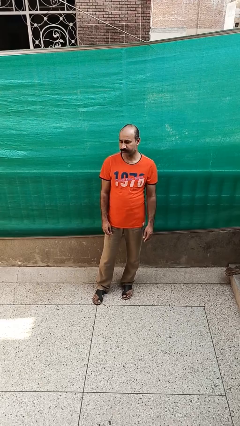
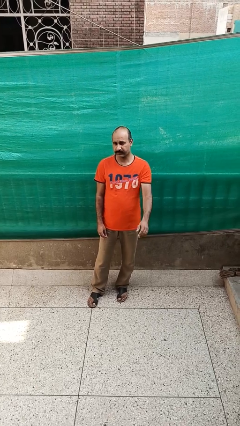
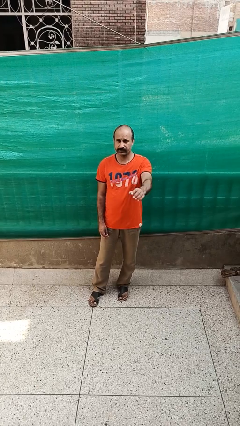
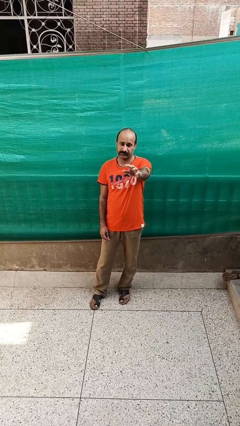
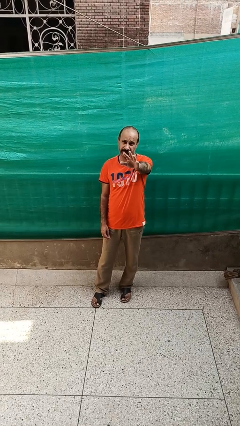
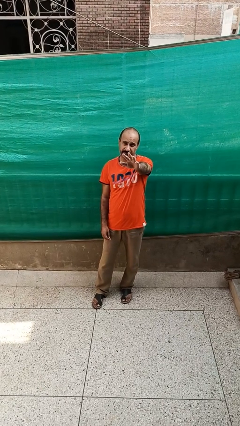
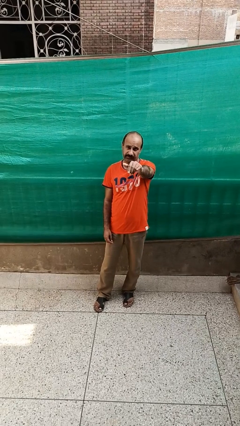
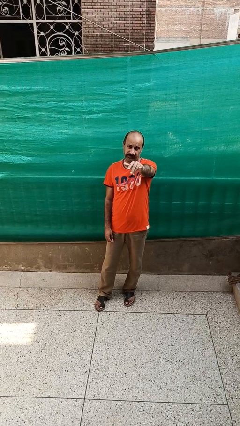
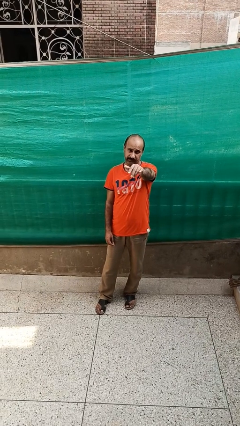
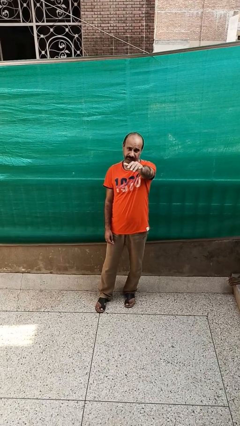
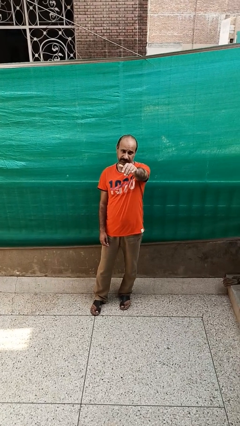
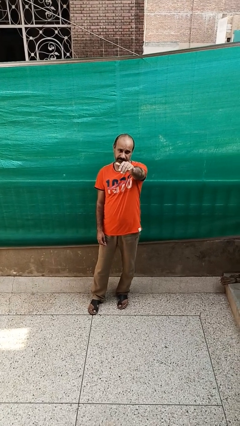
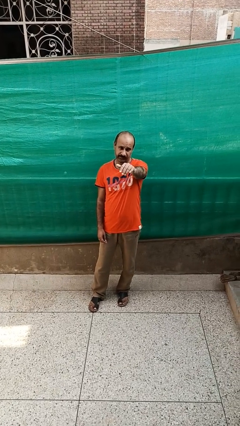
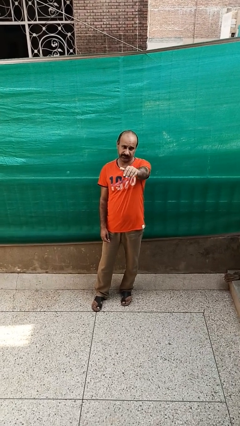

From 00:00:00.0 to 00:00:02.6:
person gestures come here

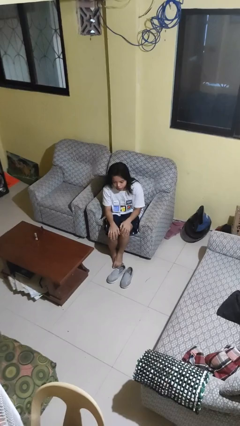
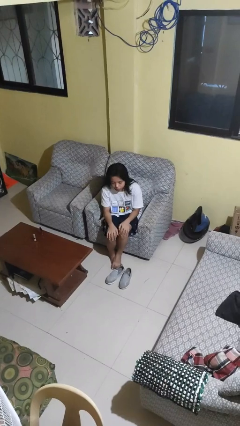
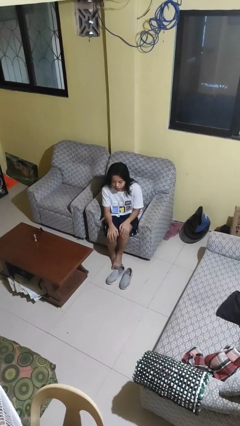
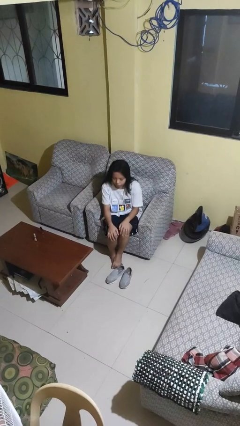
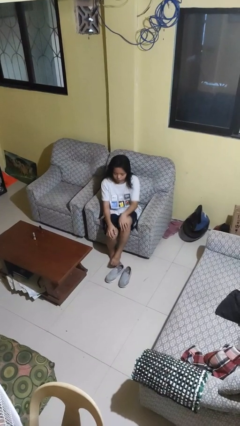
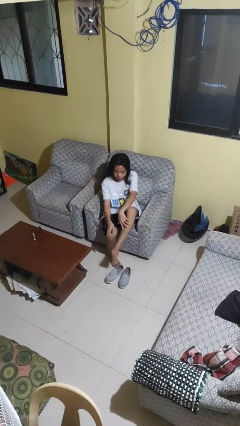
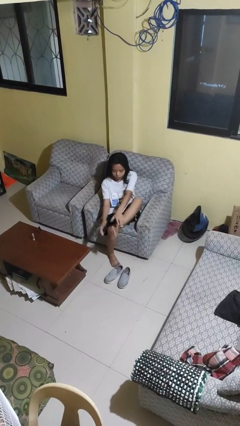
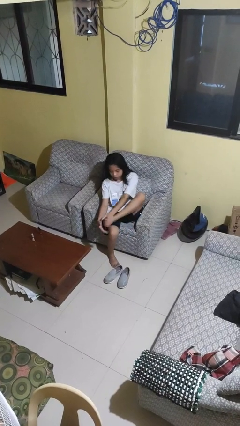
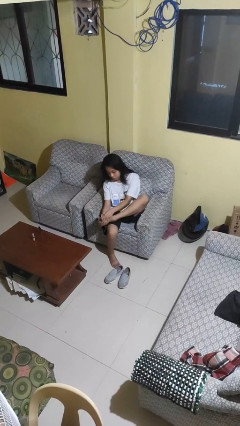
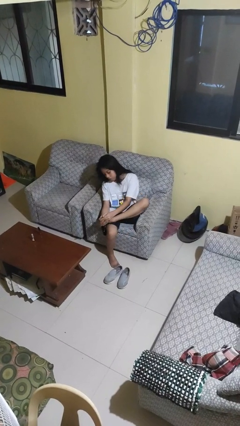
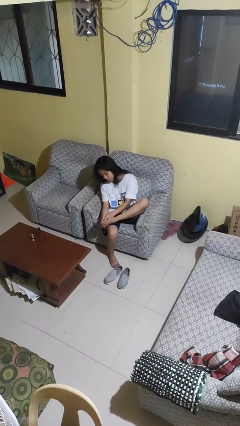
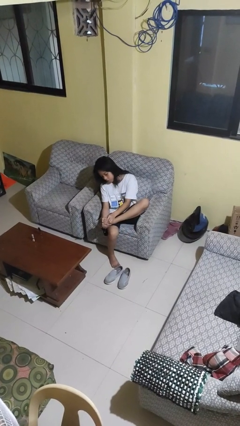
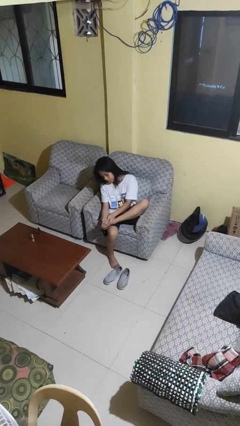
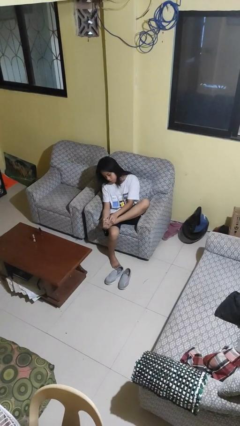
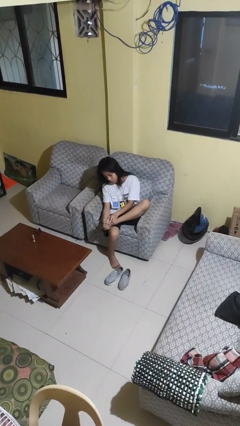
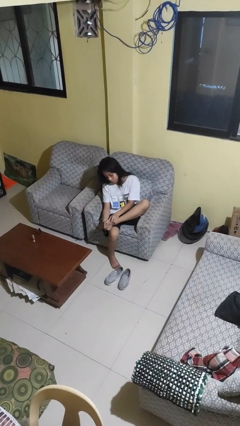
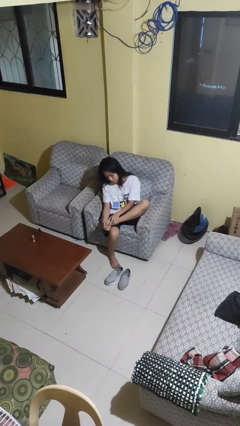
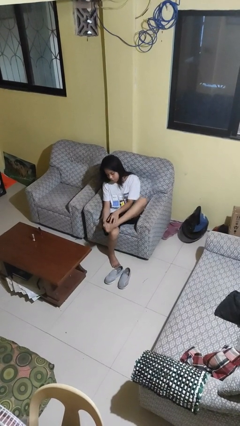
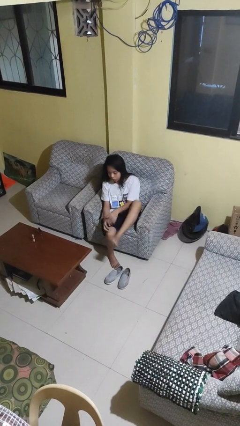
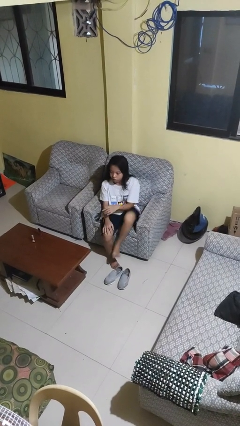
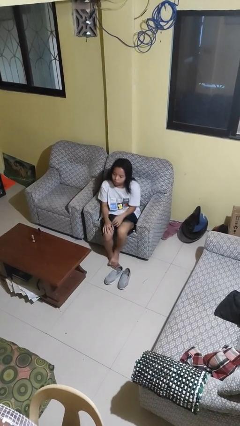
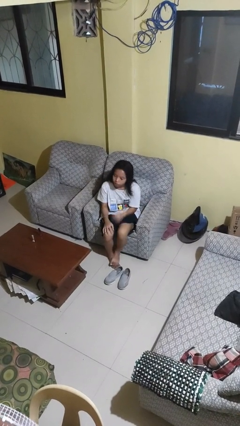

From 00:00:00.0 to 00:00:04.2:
person rubs foot

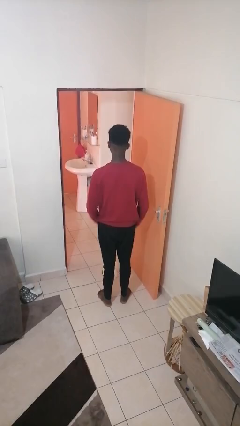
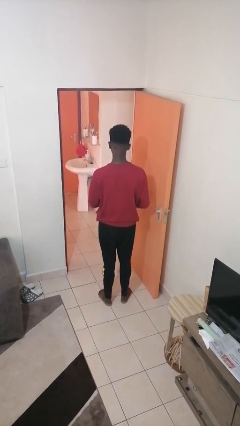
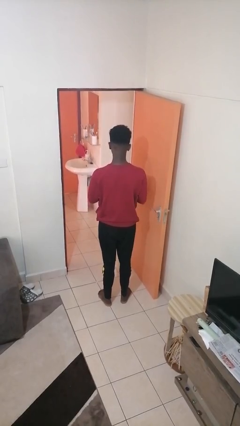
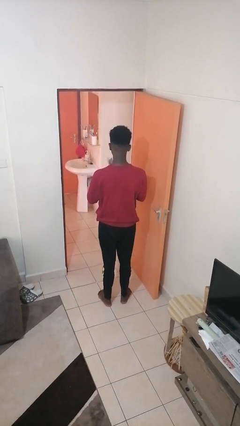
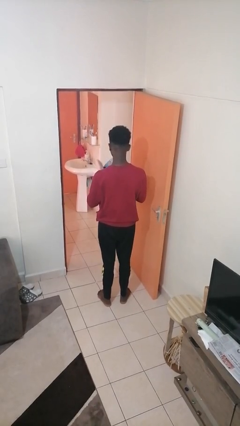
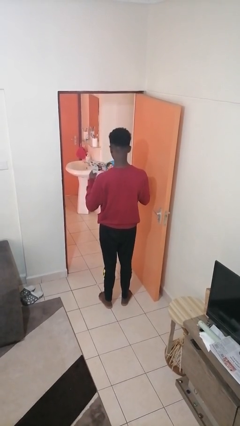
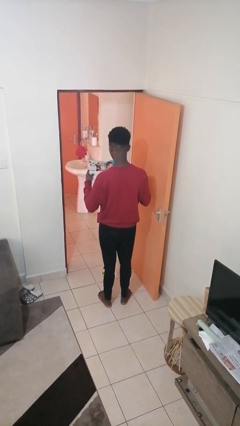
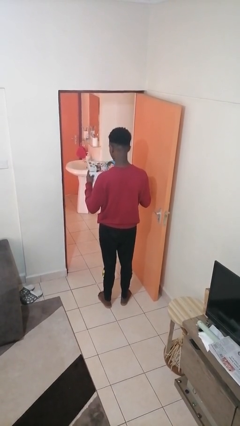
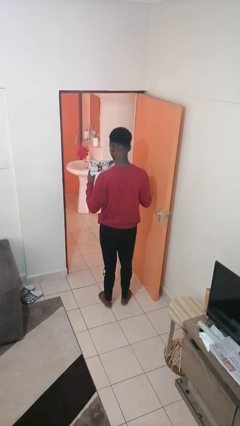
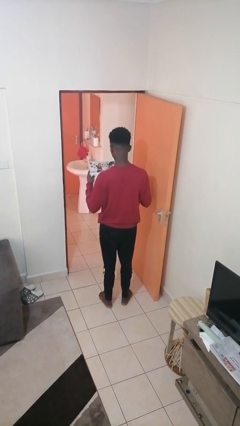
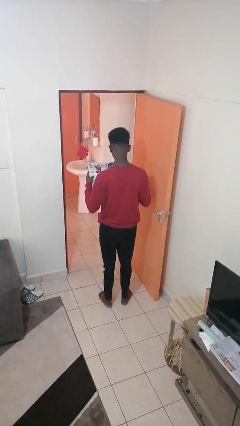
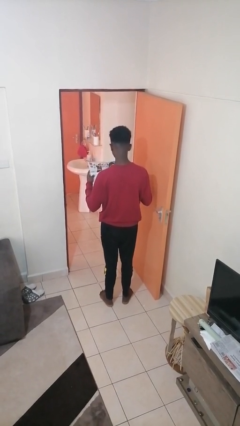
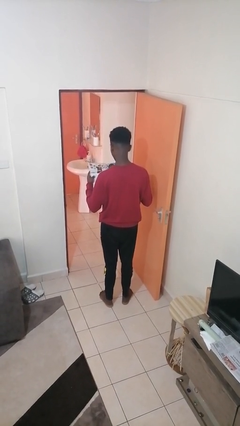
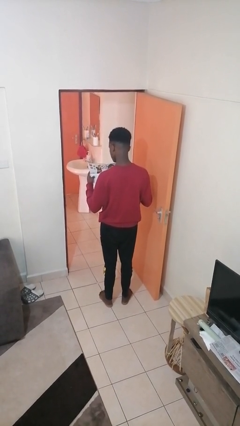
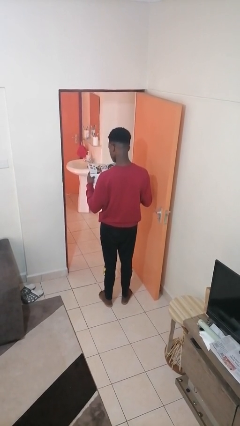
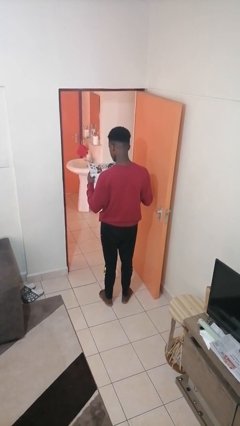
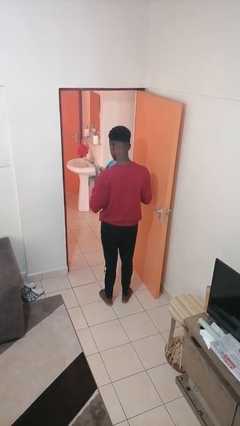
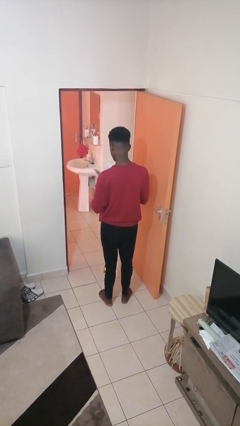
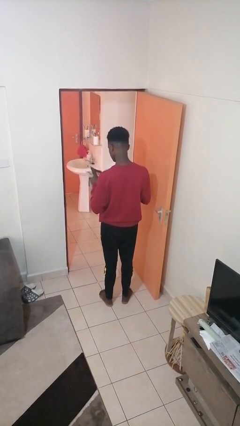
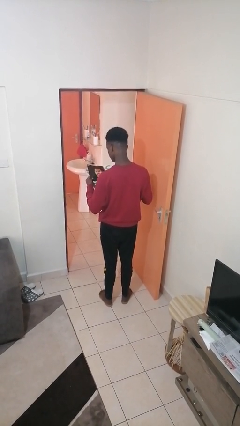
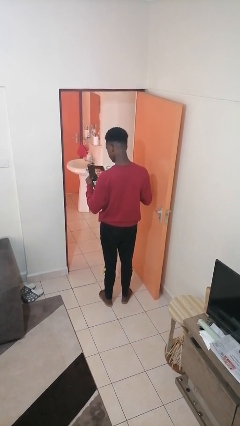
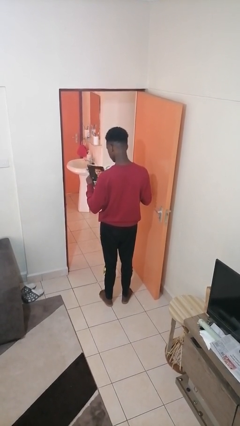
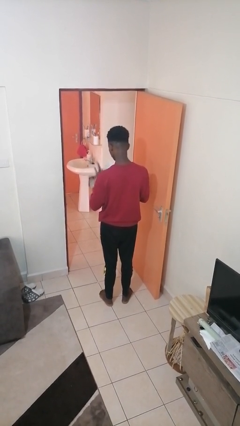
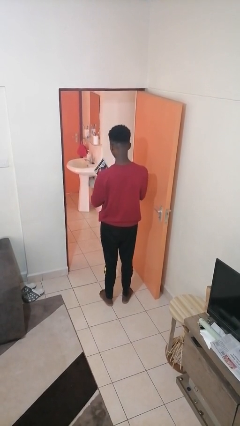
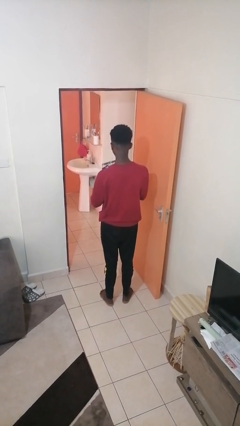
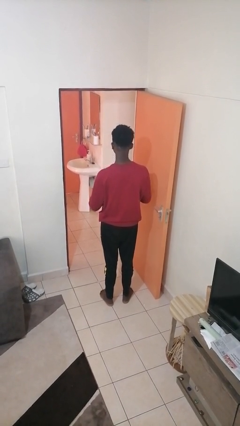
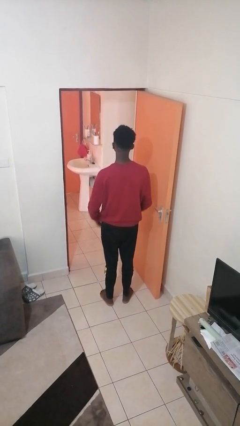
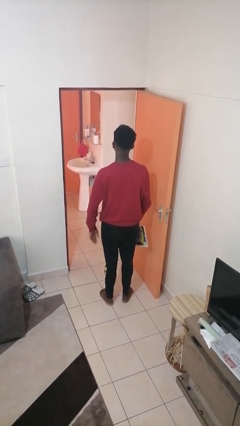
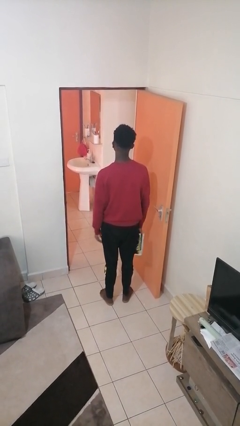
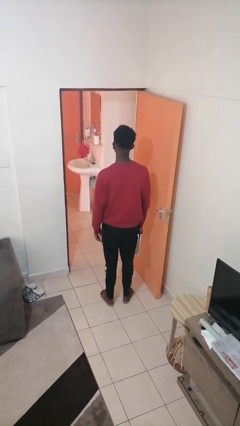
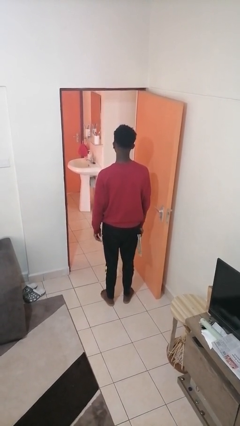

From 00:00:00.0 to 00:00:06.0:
person reads magazine

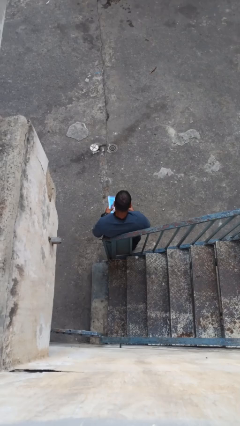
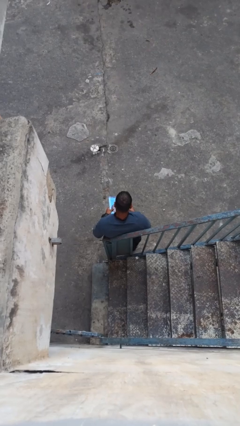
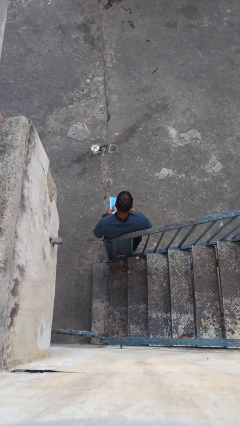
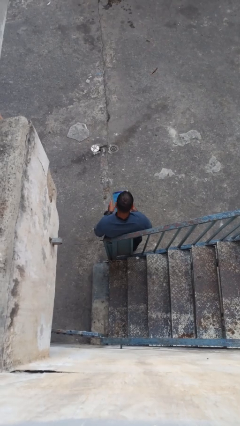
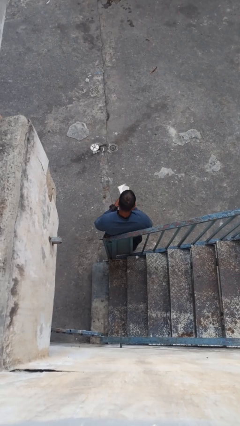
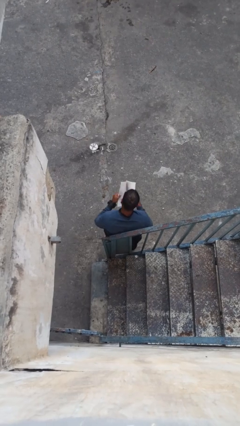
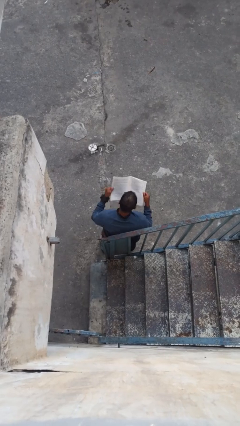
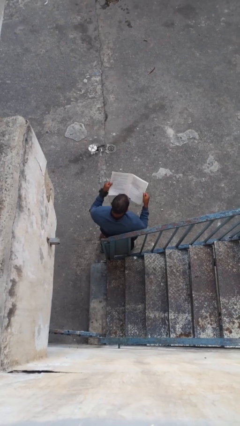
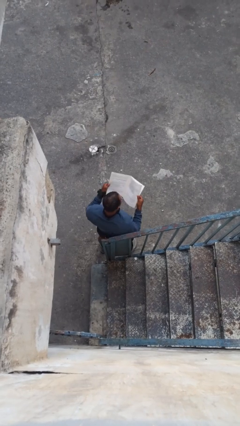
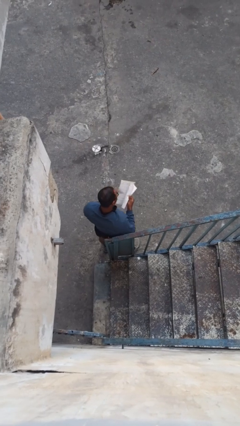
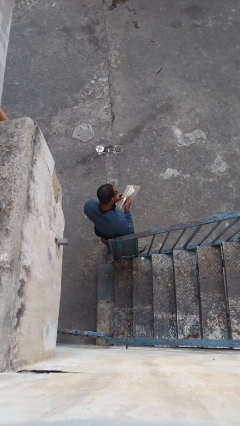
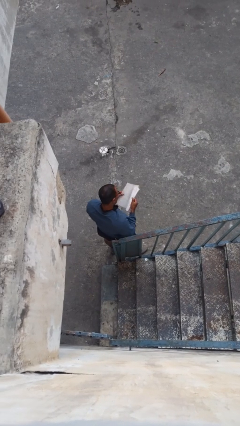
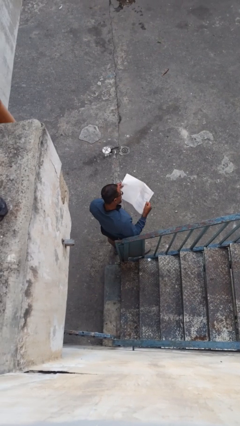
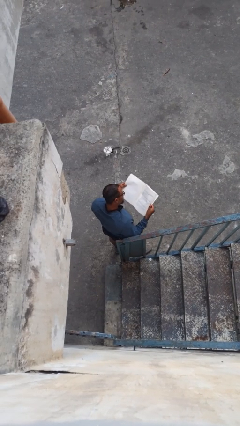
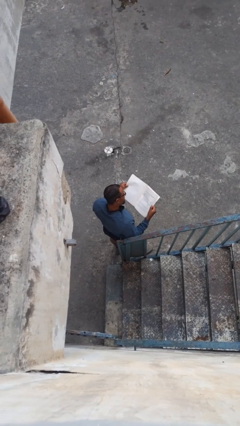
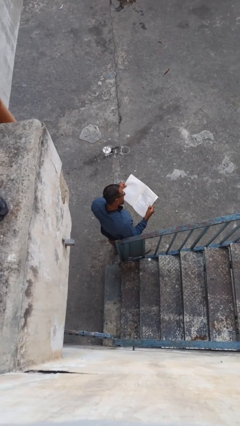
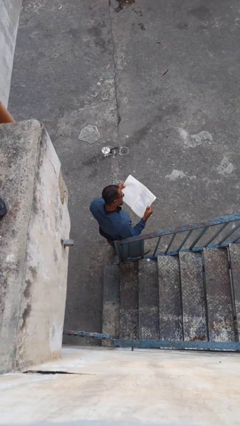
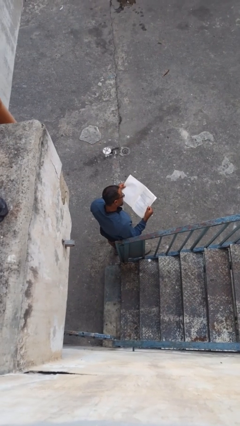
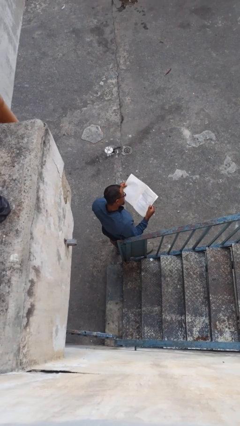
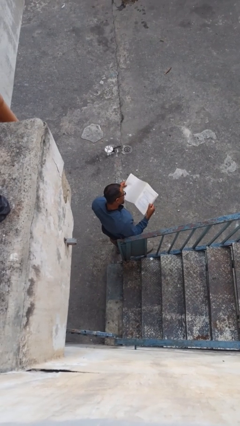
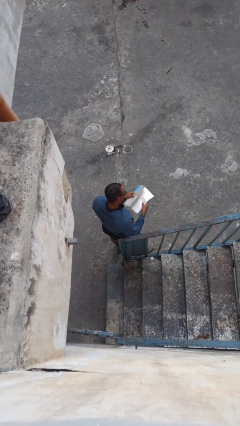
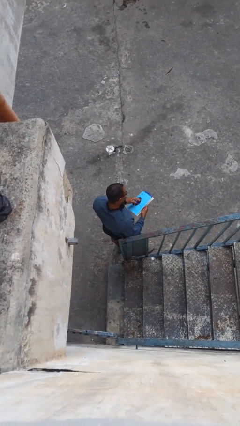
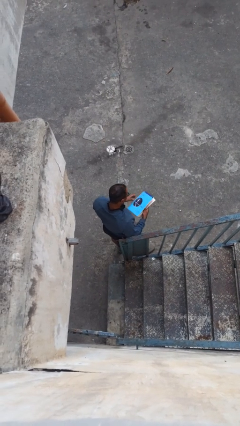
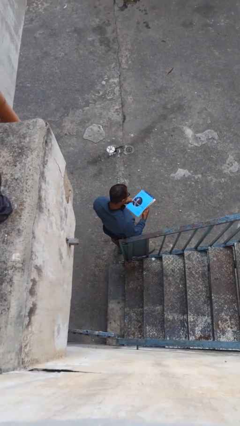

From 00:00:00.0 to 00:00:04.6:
person reads document
